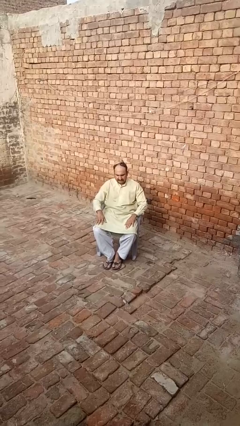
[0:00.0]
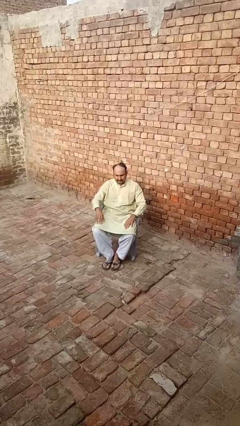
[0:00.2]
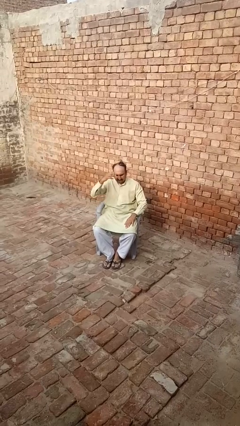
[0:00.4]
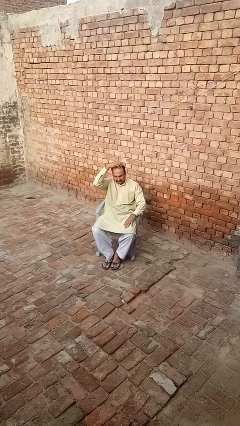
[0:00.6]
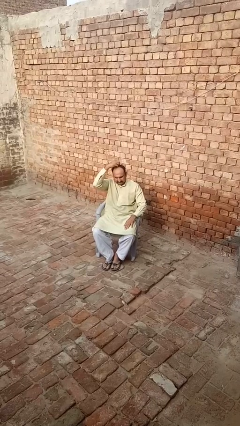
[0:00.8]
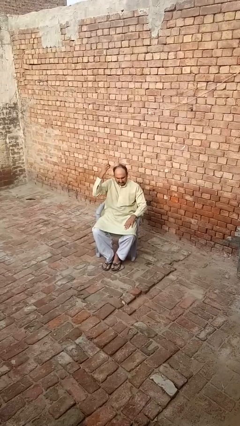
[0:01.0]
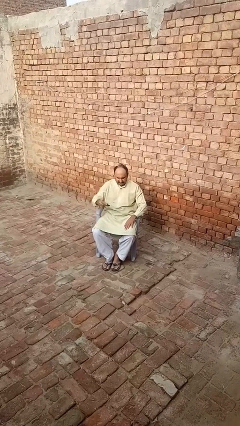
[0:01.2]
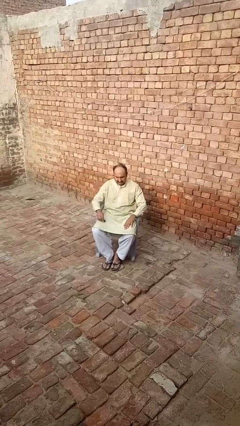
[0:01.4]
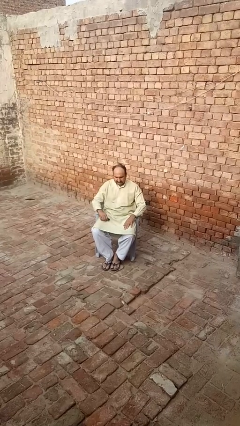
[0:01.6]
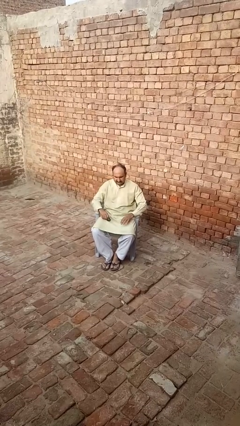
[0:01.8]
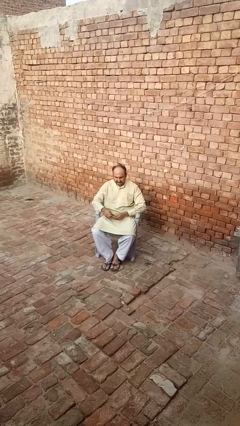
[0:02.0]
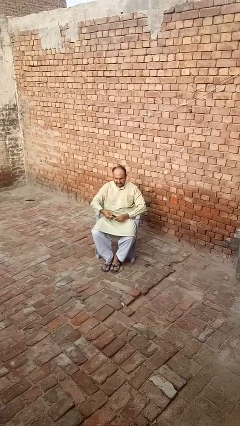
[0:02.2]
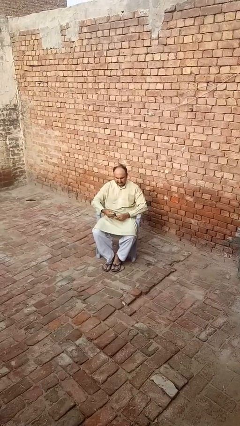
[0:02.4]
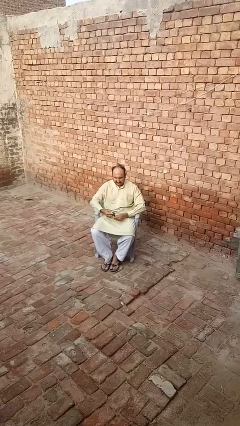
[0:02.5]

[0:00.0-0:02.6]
person takes off hairtie

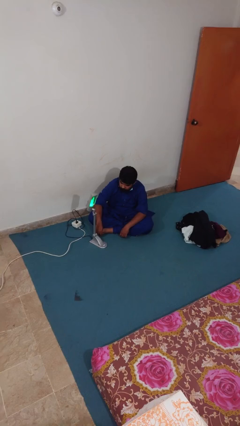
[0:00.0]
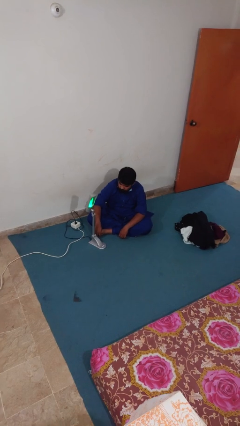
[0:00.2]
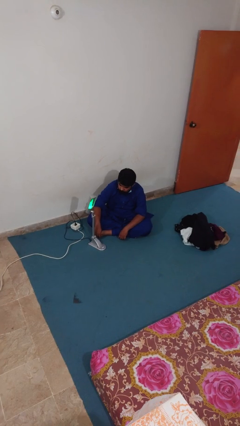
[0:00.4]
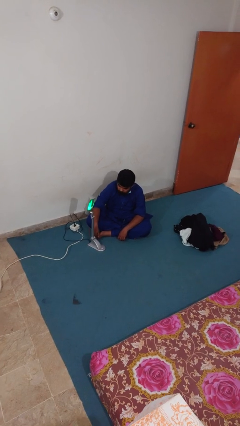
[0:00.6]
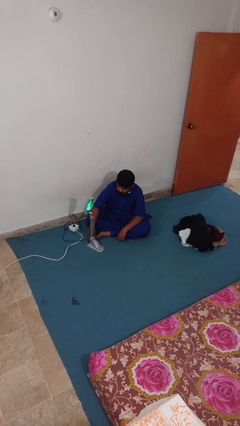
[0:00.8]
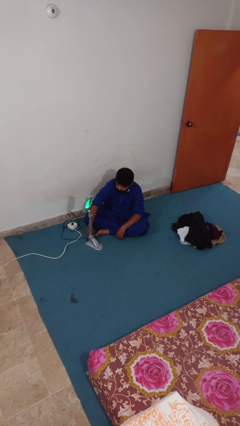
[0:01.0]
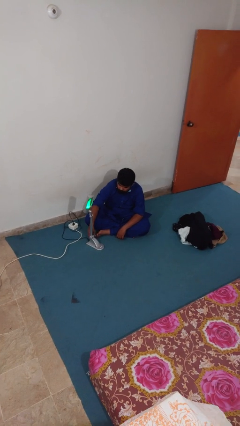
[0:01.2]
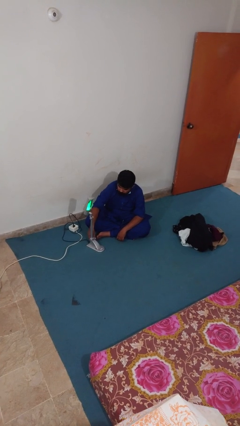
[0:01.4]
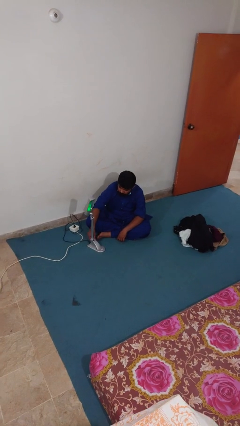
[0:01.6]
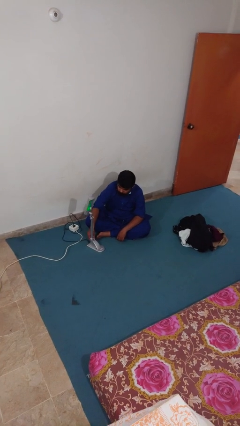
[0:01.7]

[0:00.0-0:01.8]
person turns off lamp

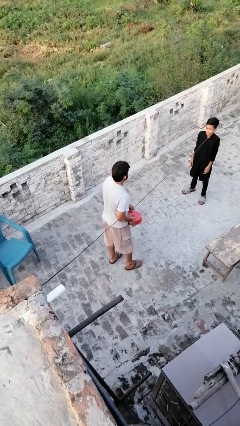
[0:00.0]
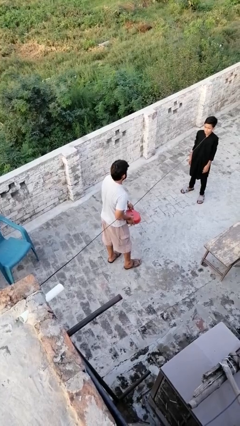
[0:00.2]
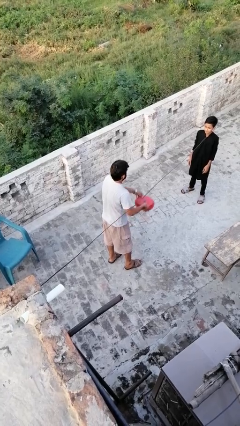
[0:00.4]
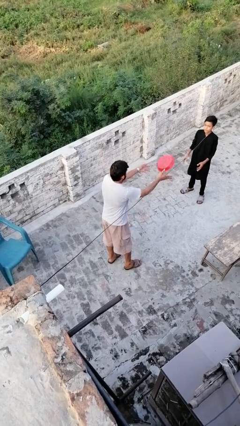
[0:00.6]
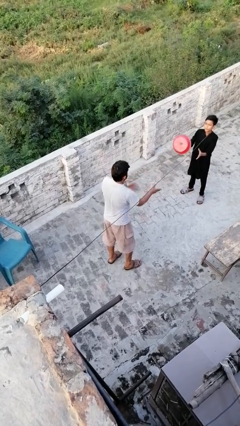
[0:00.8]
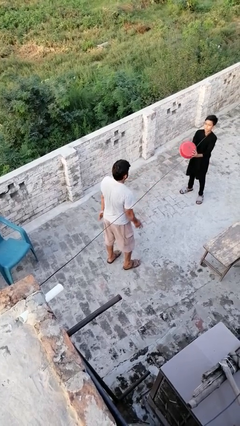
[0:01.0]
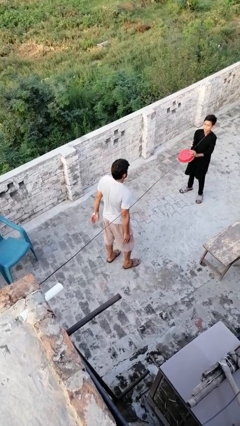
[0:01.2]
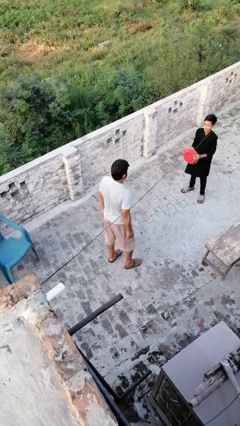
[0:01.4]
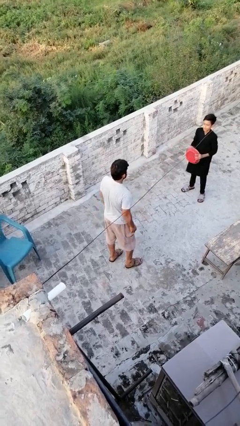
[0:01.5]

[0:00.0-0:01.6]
person throws object to person

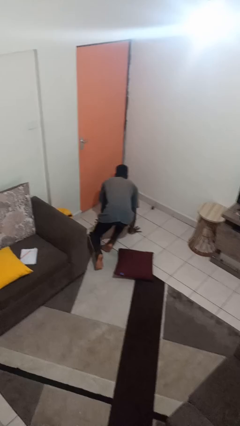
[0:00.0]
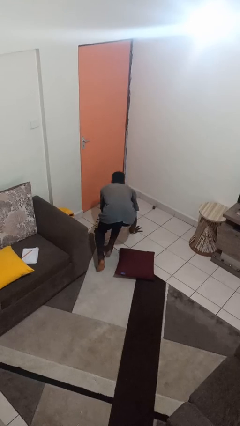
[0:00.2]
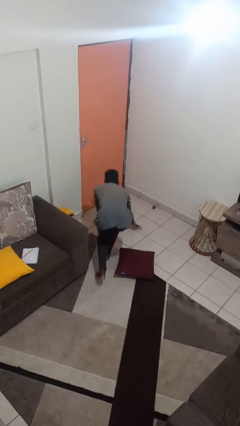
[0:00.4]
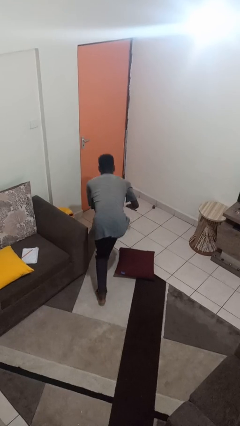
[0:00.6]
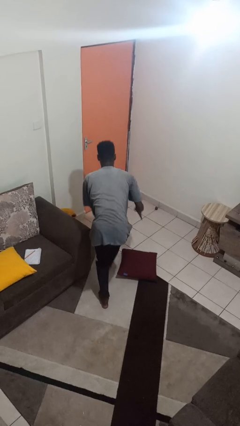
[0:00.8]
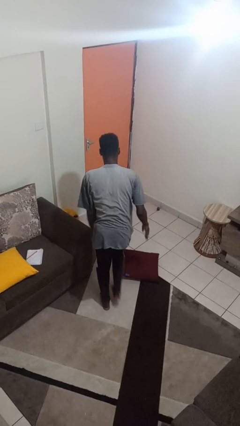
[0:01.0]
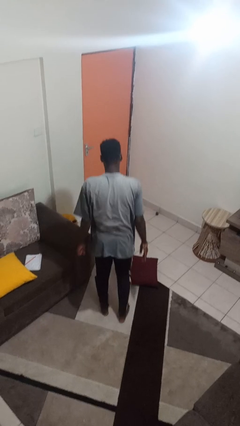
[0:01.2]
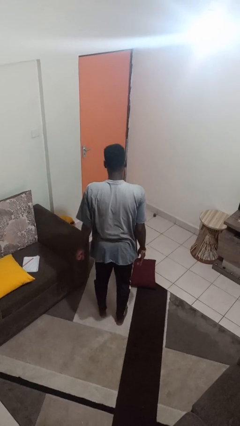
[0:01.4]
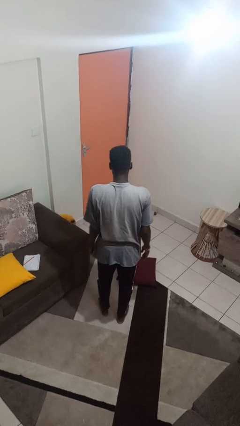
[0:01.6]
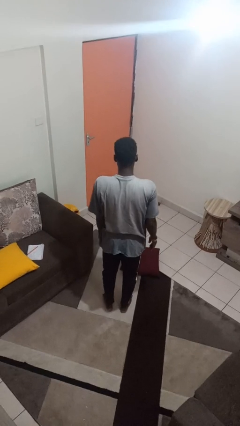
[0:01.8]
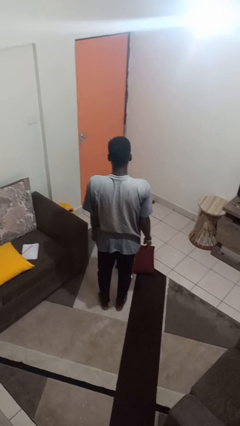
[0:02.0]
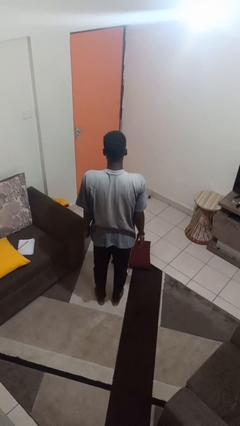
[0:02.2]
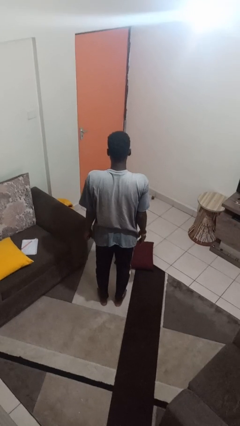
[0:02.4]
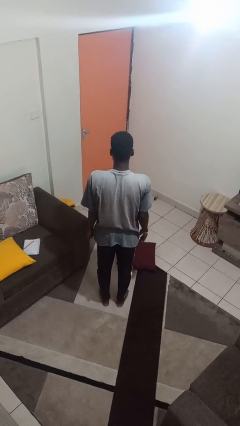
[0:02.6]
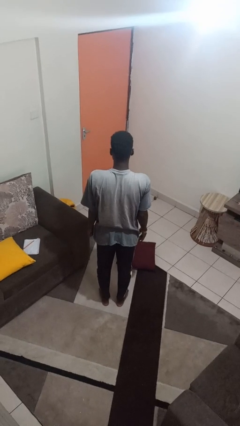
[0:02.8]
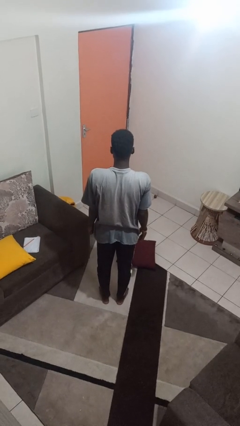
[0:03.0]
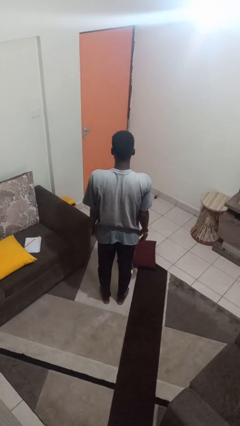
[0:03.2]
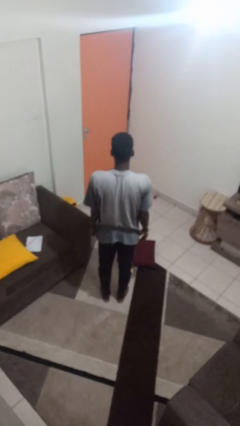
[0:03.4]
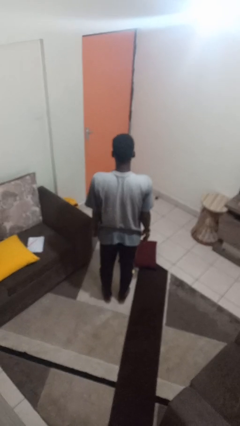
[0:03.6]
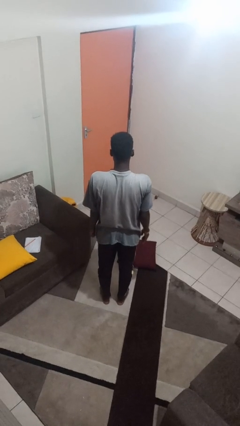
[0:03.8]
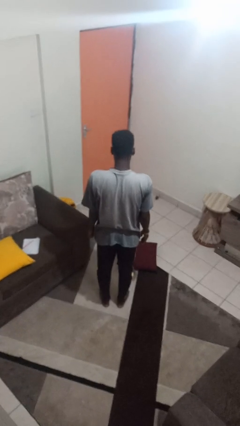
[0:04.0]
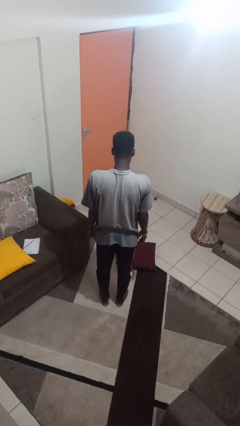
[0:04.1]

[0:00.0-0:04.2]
person stands up from floor

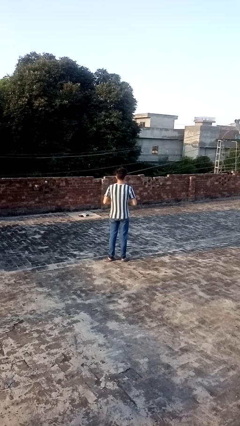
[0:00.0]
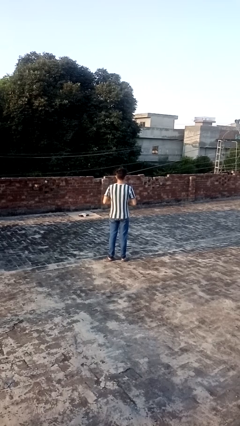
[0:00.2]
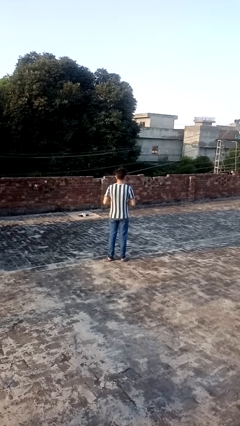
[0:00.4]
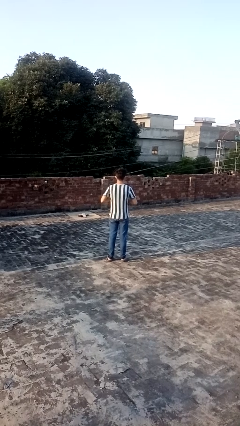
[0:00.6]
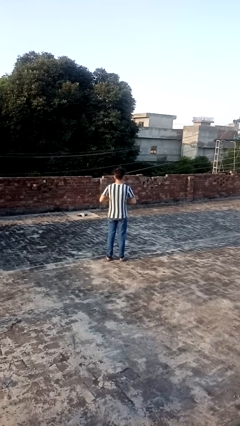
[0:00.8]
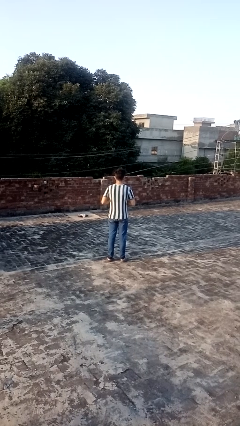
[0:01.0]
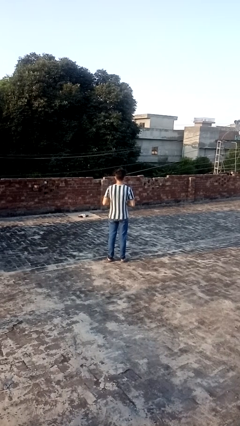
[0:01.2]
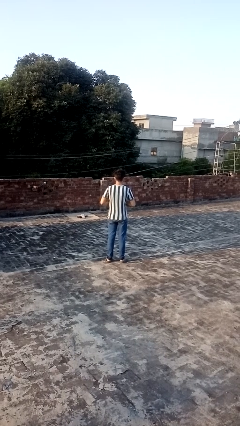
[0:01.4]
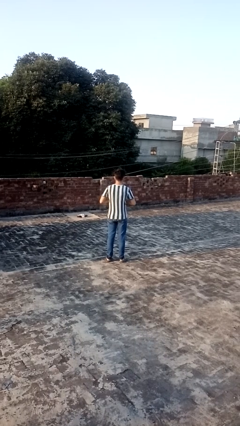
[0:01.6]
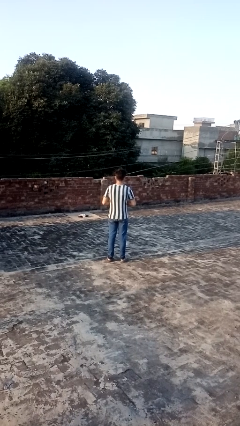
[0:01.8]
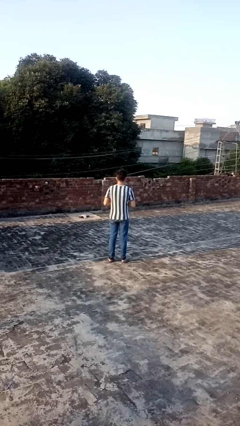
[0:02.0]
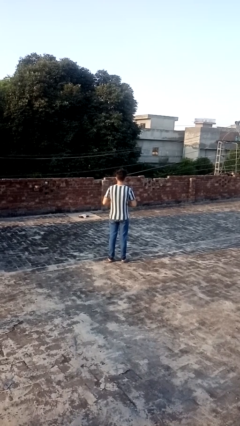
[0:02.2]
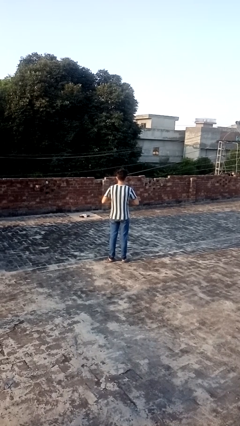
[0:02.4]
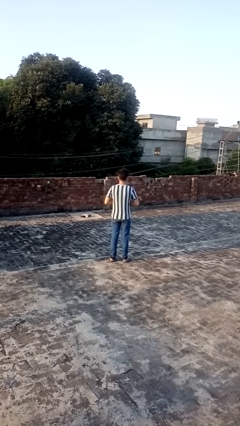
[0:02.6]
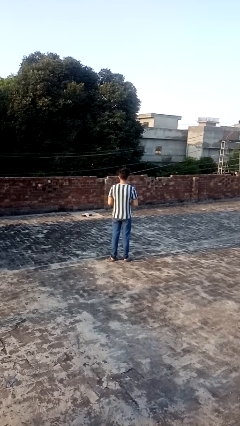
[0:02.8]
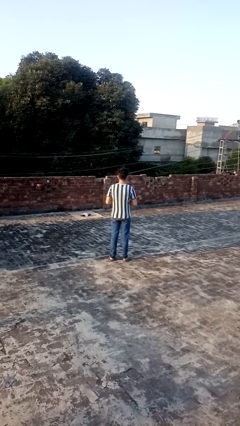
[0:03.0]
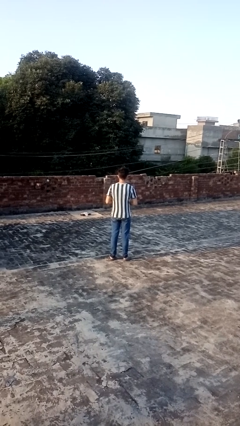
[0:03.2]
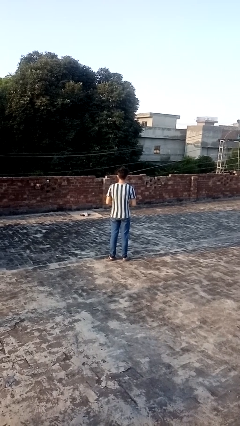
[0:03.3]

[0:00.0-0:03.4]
person cracks knuckles

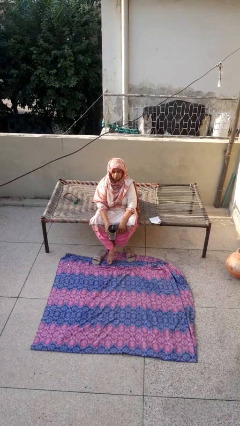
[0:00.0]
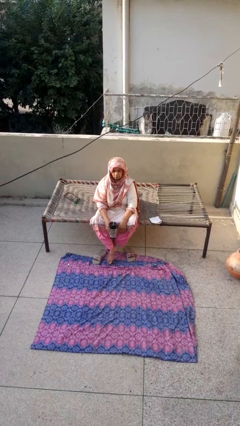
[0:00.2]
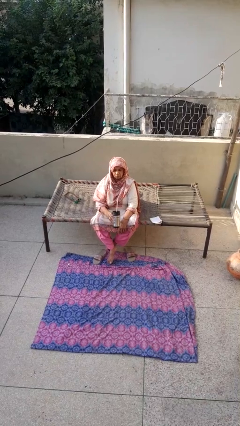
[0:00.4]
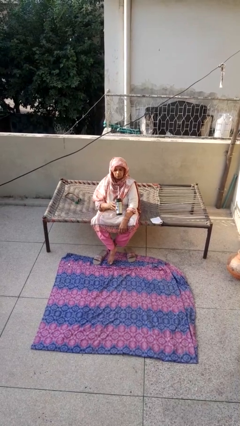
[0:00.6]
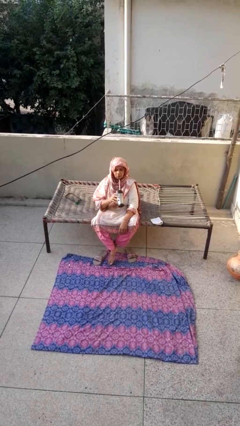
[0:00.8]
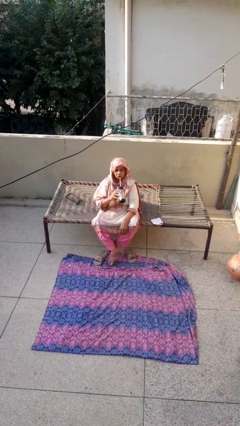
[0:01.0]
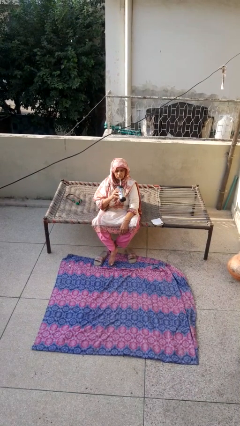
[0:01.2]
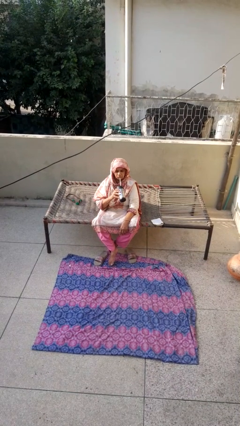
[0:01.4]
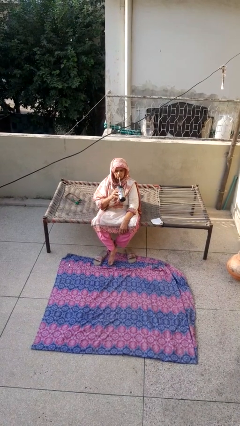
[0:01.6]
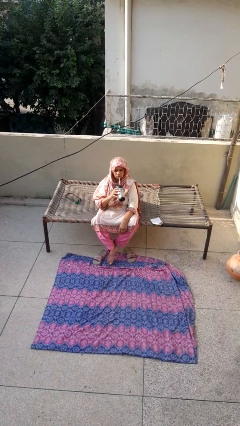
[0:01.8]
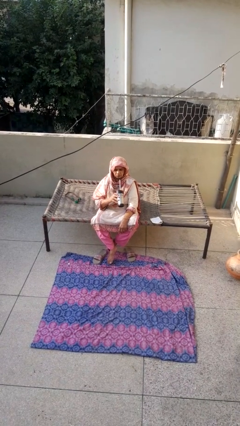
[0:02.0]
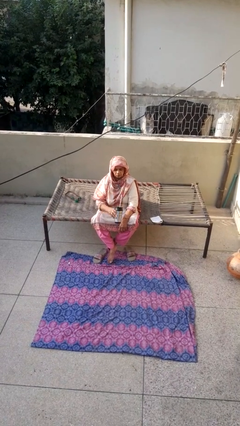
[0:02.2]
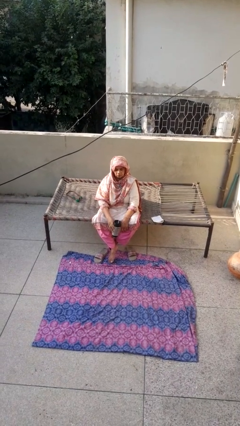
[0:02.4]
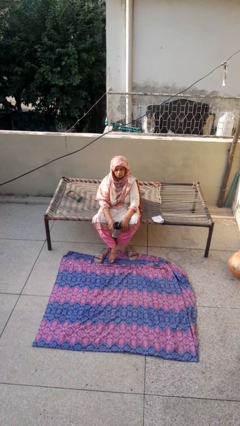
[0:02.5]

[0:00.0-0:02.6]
person drinks from straw

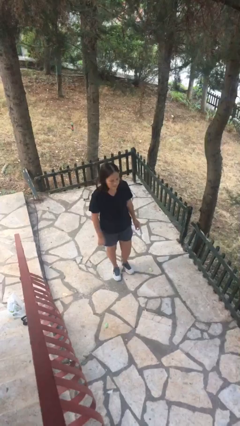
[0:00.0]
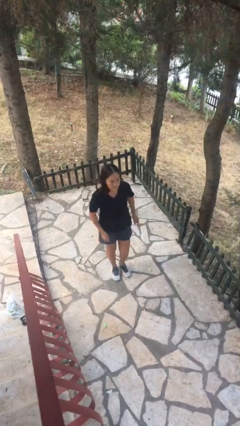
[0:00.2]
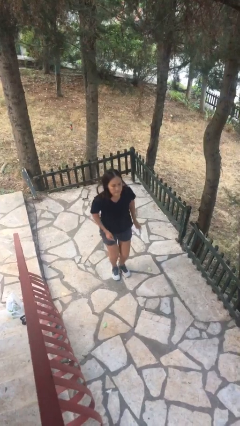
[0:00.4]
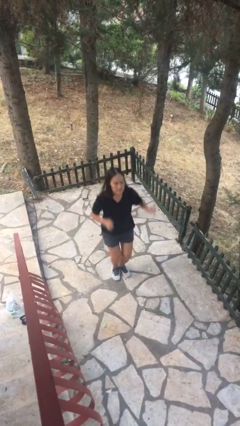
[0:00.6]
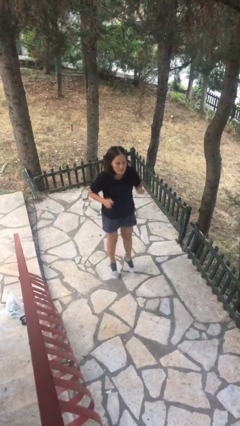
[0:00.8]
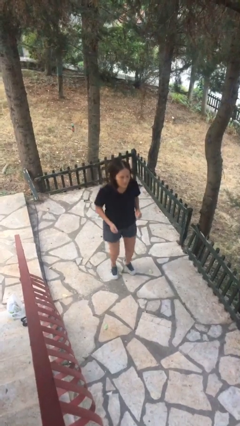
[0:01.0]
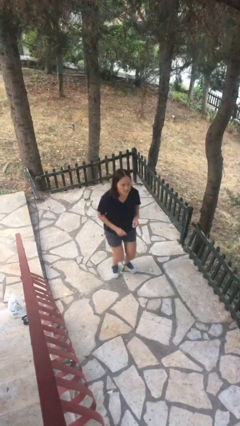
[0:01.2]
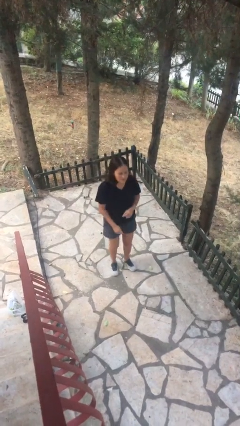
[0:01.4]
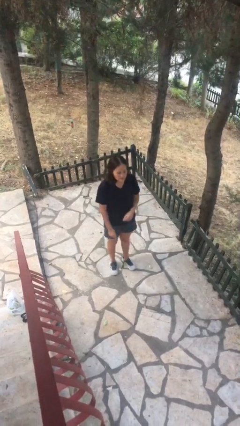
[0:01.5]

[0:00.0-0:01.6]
person jumps
